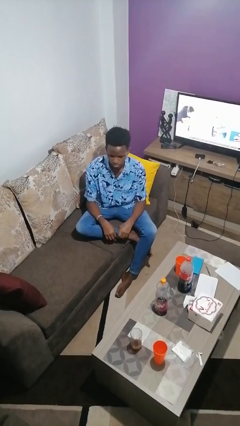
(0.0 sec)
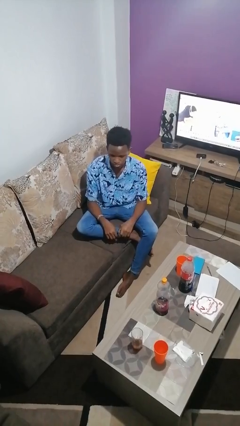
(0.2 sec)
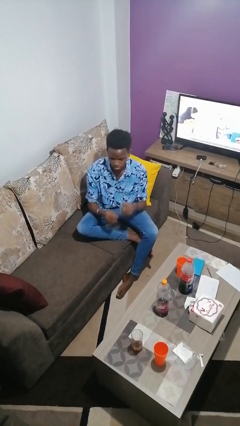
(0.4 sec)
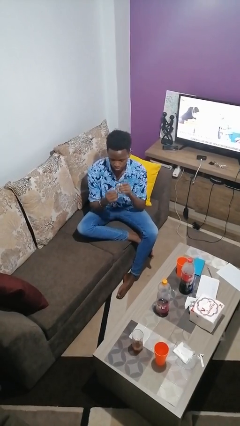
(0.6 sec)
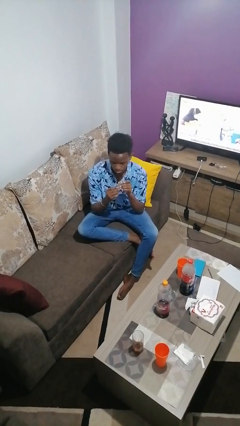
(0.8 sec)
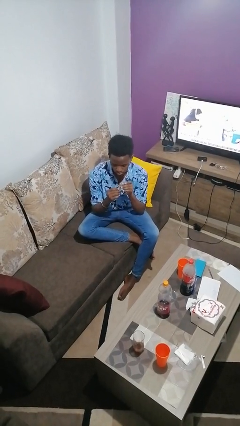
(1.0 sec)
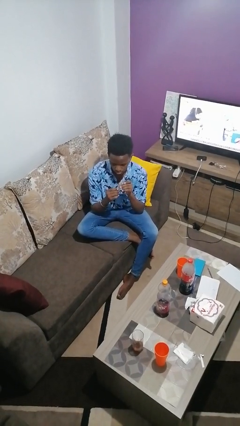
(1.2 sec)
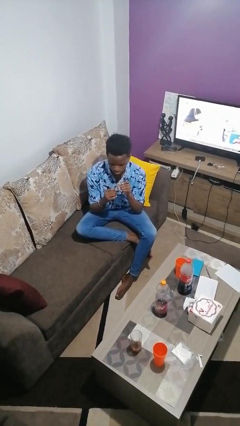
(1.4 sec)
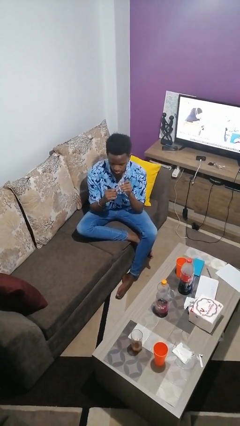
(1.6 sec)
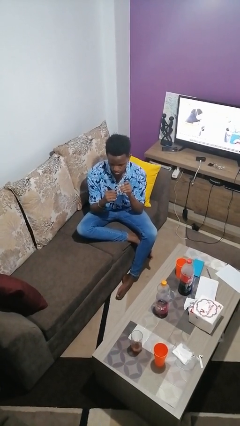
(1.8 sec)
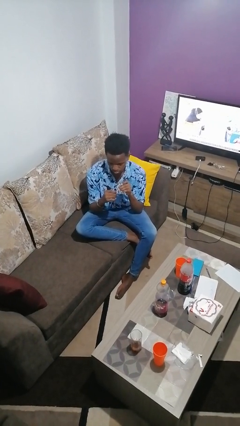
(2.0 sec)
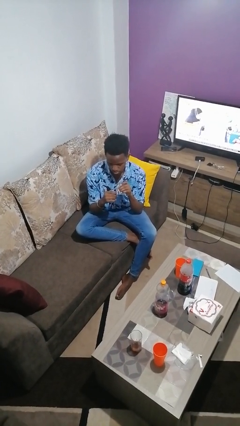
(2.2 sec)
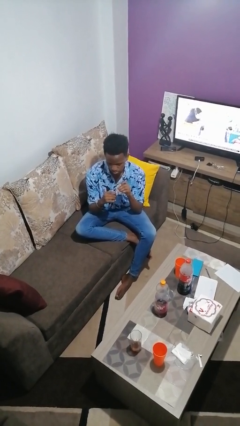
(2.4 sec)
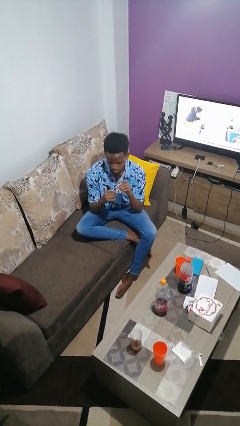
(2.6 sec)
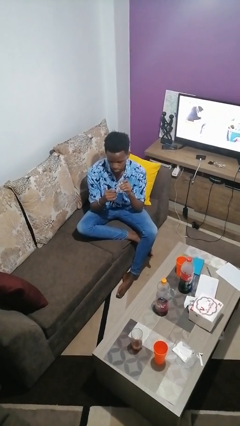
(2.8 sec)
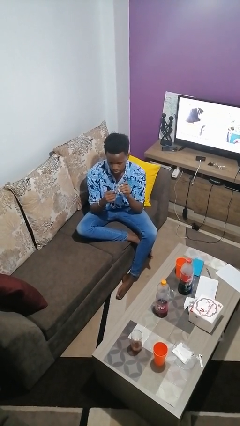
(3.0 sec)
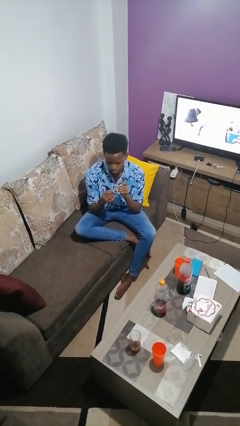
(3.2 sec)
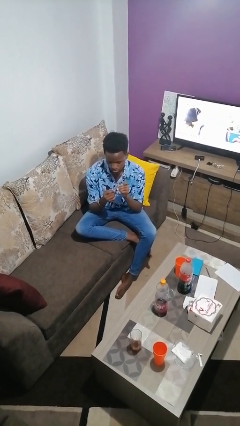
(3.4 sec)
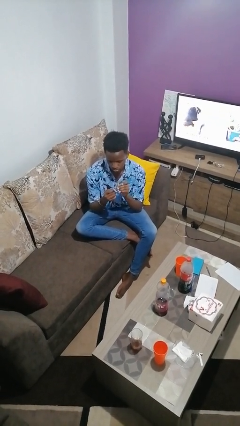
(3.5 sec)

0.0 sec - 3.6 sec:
person clips fingernails

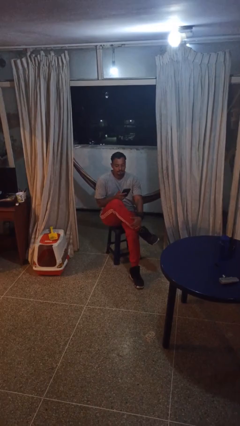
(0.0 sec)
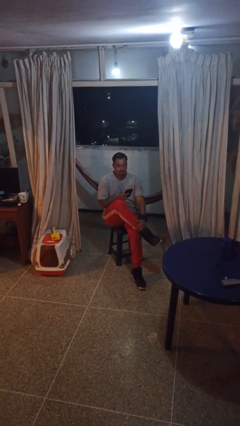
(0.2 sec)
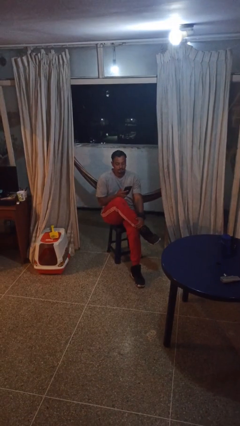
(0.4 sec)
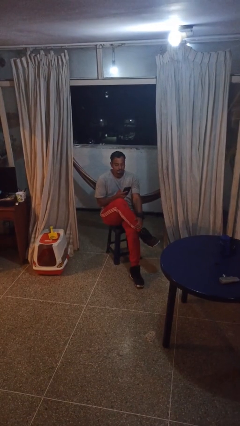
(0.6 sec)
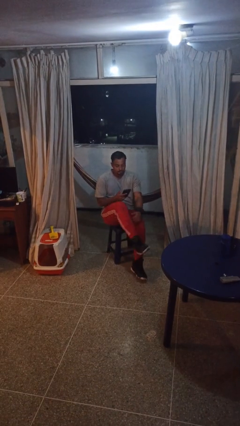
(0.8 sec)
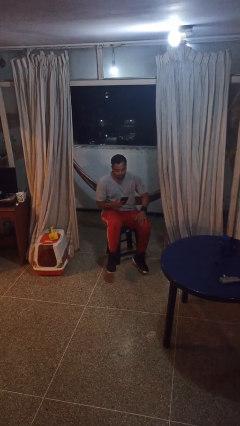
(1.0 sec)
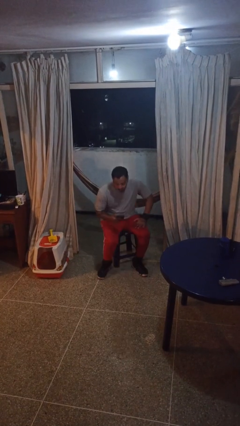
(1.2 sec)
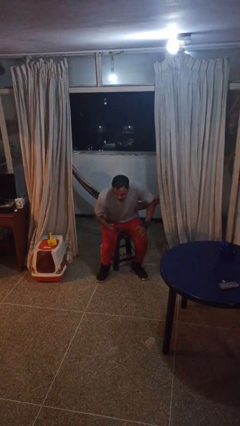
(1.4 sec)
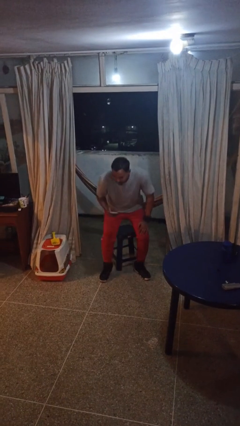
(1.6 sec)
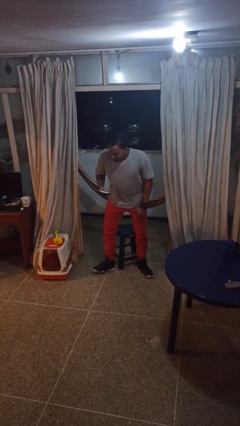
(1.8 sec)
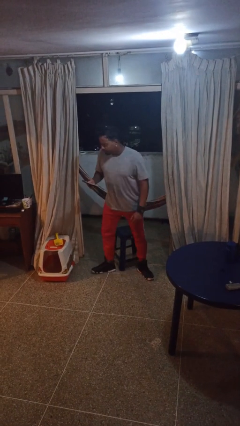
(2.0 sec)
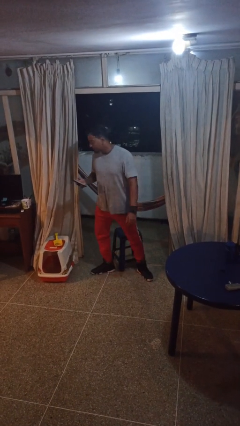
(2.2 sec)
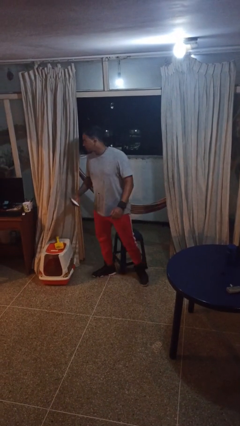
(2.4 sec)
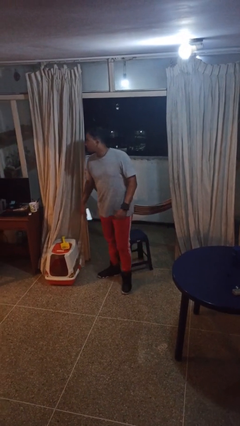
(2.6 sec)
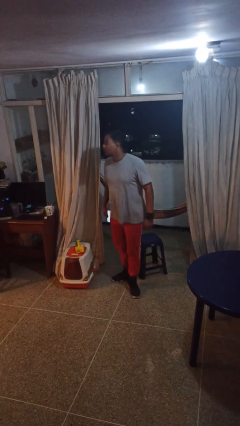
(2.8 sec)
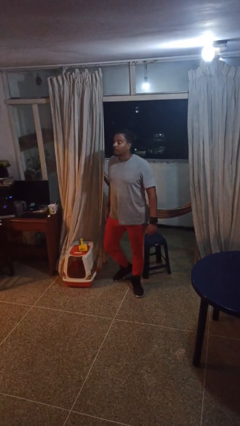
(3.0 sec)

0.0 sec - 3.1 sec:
person stands up

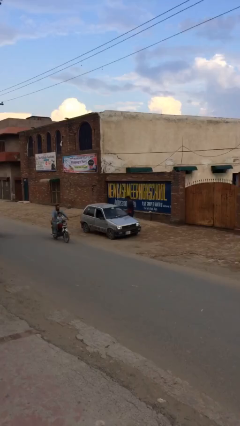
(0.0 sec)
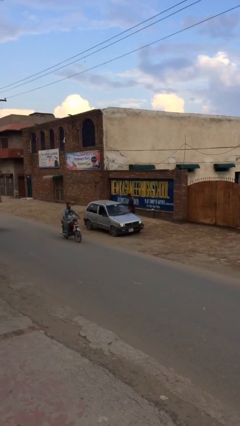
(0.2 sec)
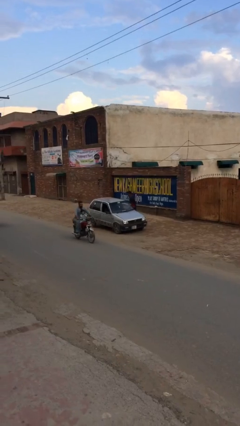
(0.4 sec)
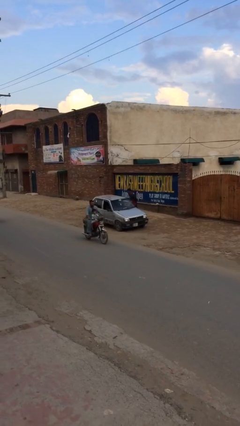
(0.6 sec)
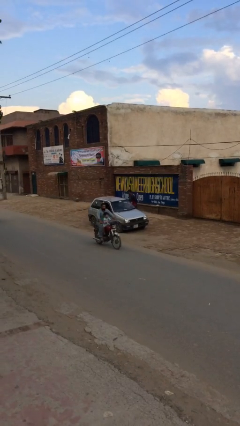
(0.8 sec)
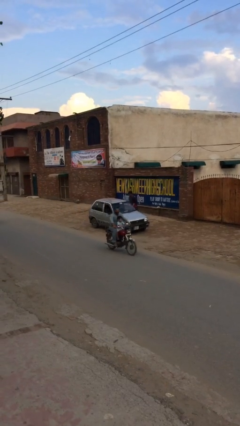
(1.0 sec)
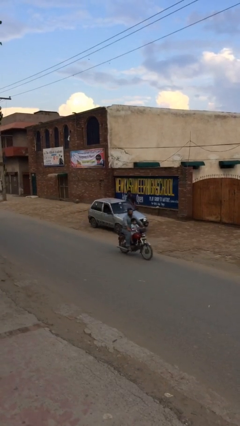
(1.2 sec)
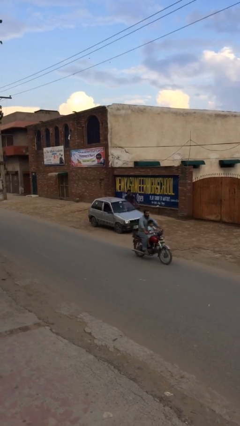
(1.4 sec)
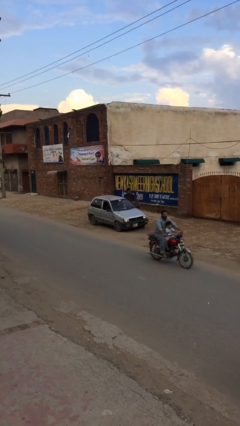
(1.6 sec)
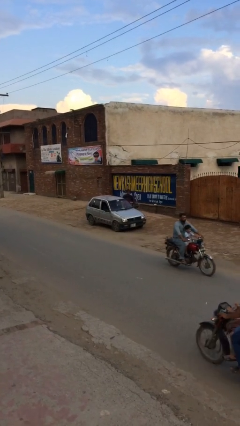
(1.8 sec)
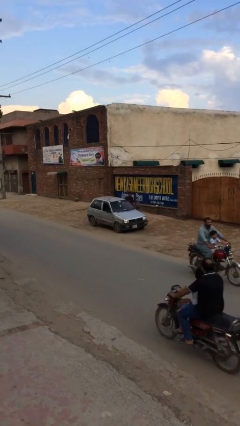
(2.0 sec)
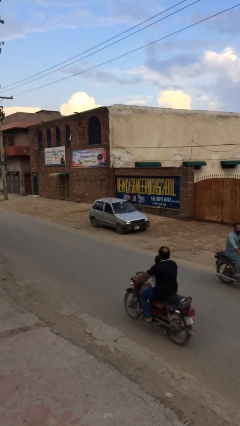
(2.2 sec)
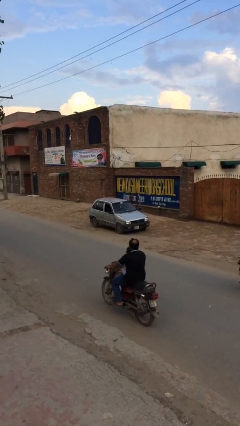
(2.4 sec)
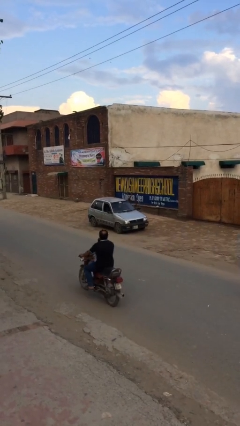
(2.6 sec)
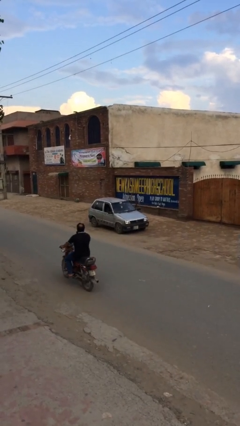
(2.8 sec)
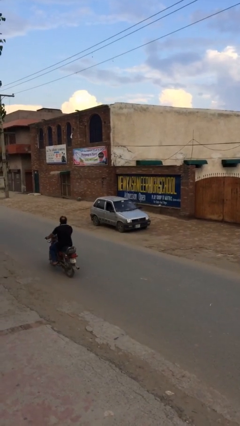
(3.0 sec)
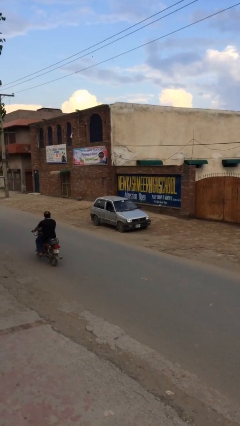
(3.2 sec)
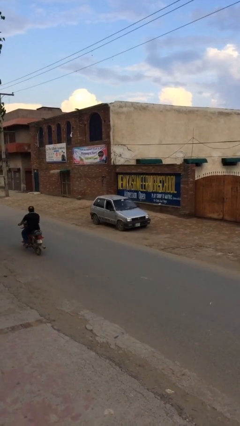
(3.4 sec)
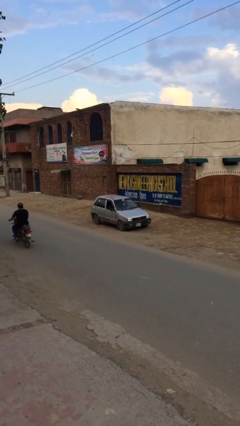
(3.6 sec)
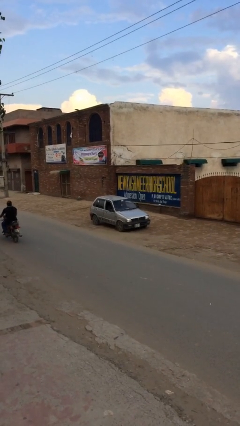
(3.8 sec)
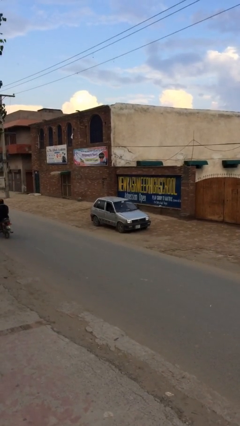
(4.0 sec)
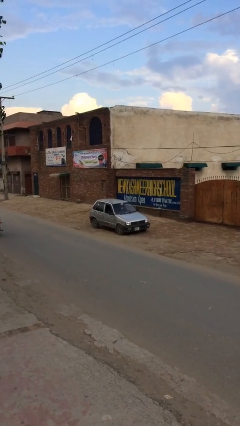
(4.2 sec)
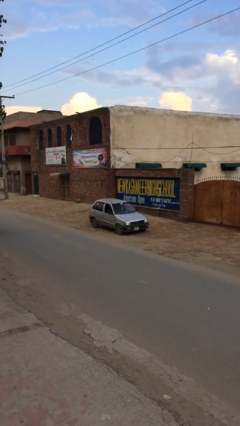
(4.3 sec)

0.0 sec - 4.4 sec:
car picks up person

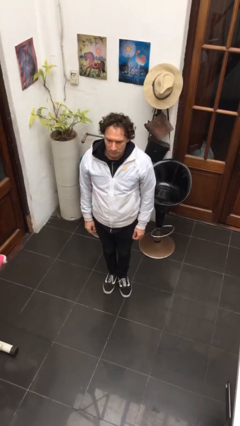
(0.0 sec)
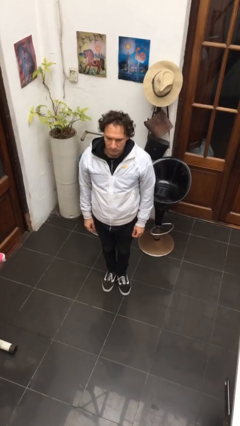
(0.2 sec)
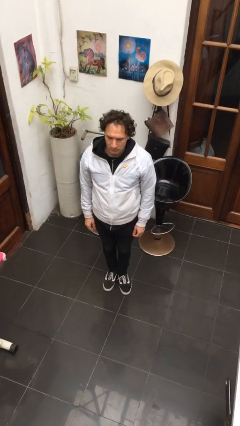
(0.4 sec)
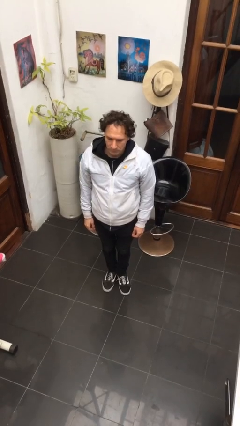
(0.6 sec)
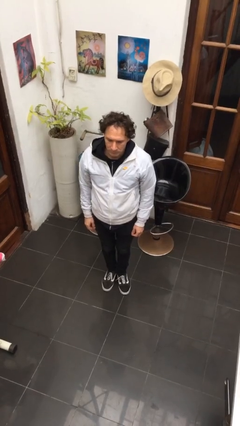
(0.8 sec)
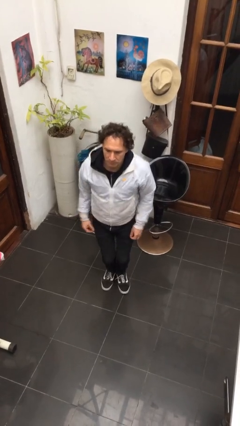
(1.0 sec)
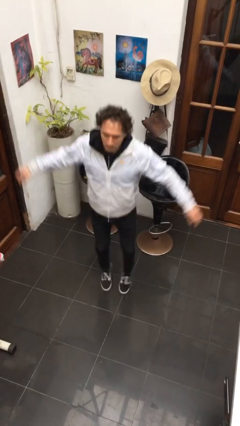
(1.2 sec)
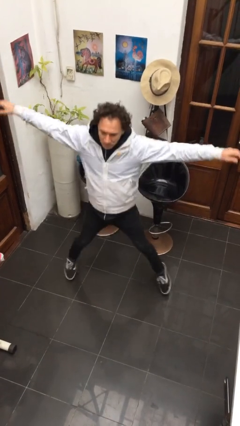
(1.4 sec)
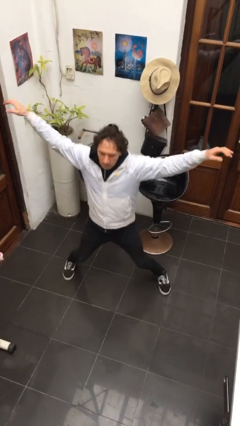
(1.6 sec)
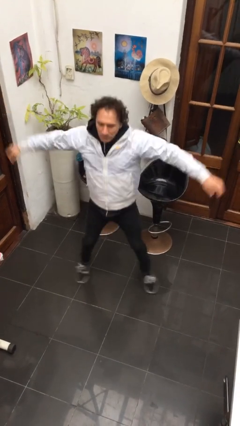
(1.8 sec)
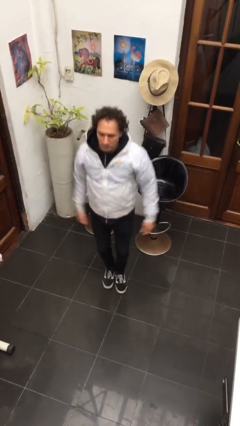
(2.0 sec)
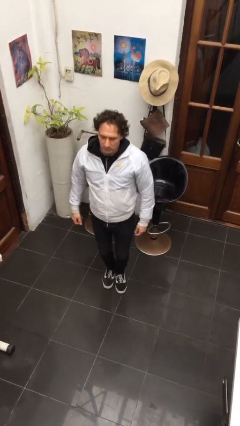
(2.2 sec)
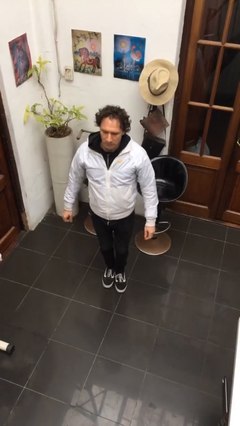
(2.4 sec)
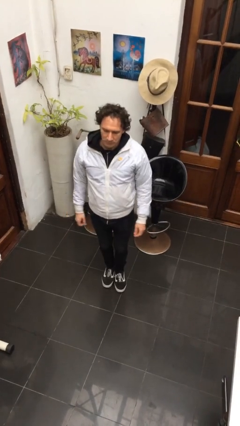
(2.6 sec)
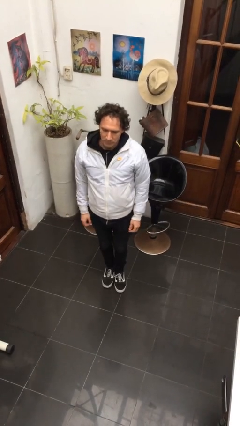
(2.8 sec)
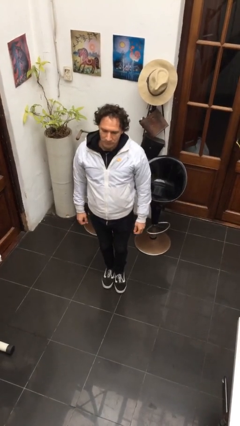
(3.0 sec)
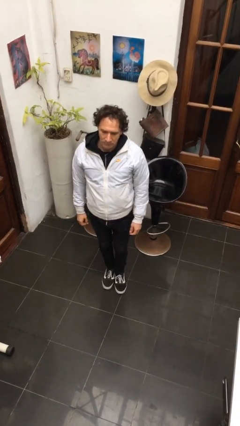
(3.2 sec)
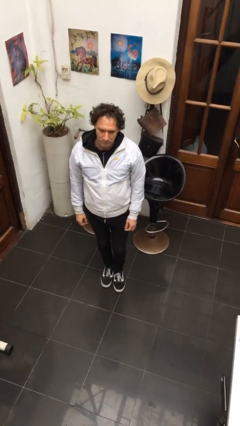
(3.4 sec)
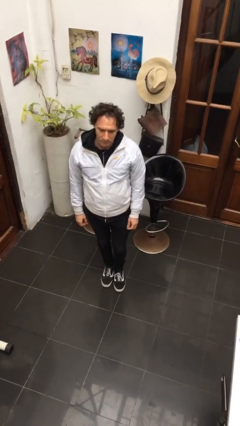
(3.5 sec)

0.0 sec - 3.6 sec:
person exercises with jumping jacks

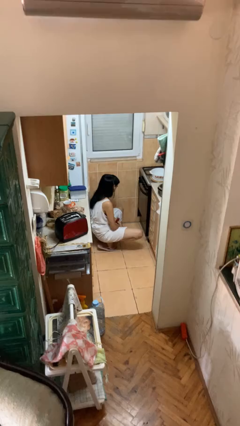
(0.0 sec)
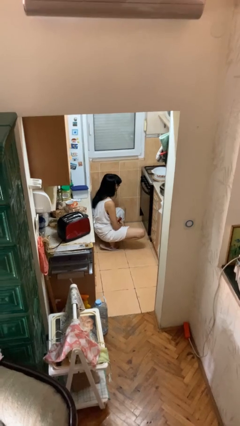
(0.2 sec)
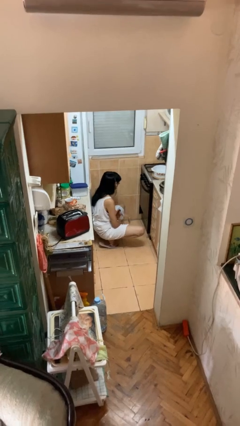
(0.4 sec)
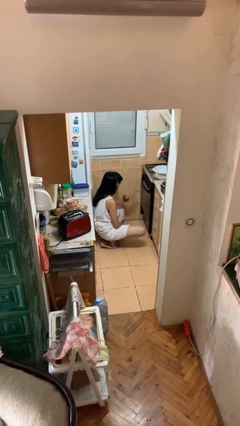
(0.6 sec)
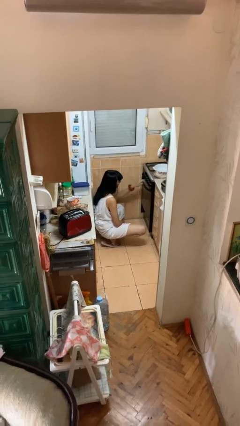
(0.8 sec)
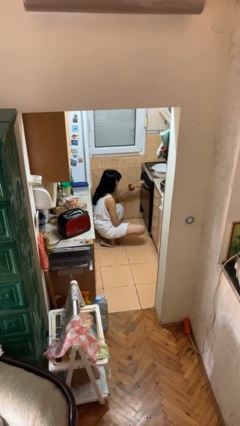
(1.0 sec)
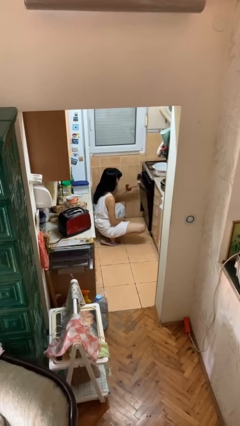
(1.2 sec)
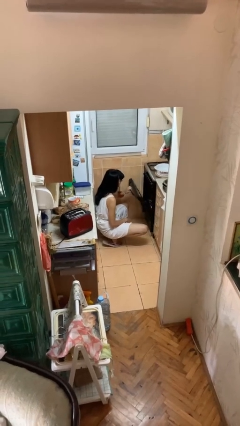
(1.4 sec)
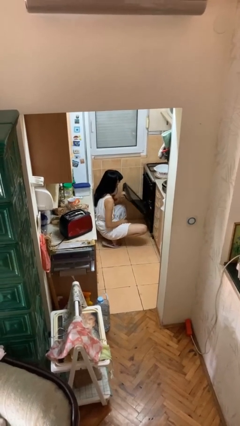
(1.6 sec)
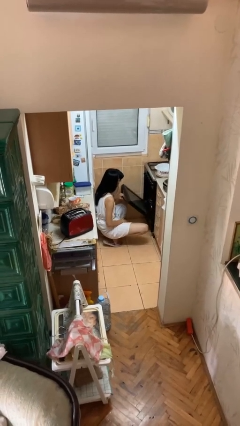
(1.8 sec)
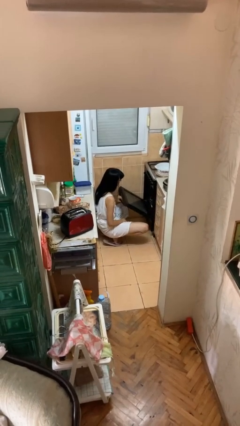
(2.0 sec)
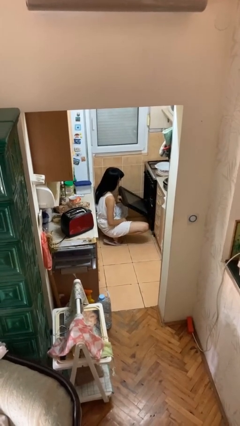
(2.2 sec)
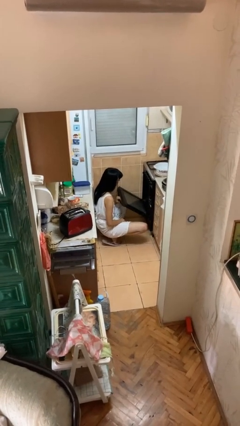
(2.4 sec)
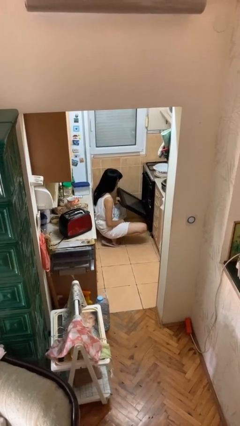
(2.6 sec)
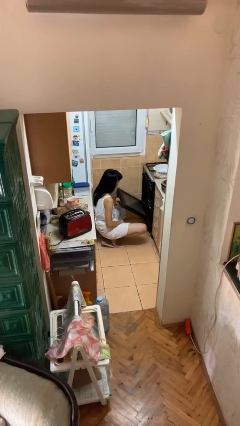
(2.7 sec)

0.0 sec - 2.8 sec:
person opens oven door
